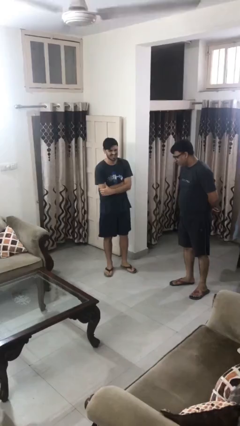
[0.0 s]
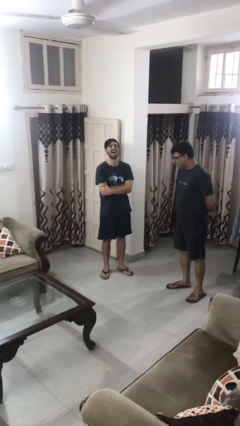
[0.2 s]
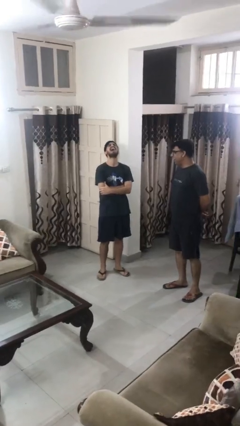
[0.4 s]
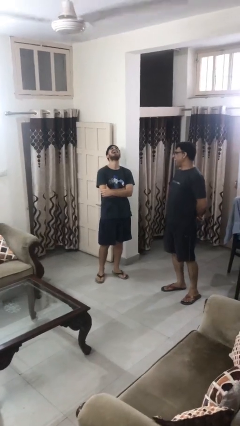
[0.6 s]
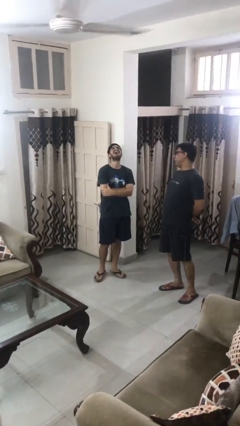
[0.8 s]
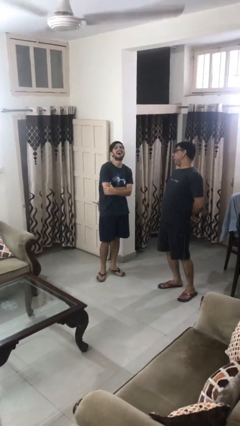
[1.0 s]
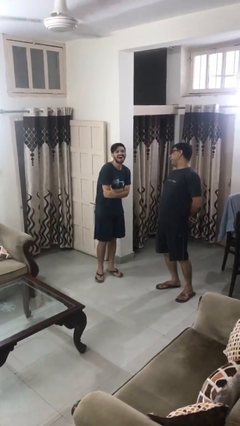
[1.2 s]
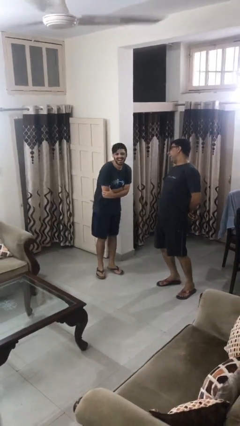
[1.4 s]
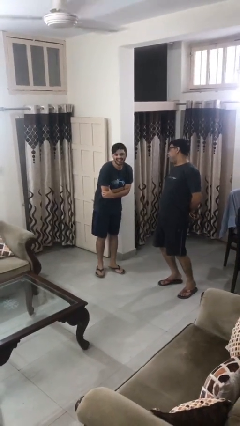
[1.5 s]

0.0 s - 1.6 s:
person laughs with person

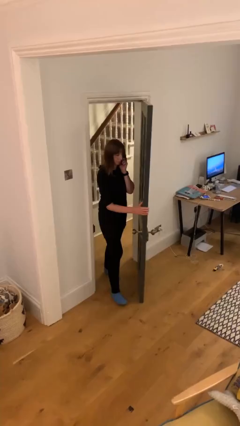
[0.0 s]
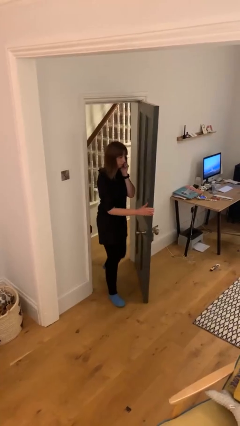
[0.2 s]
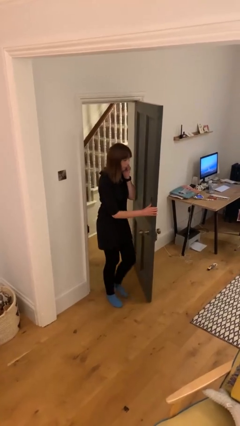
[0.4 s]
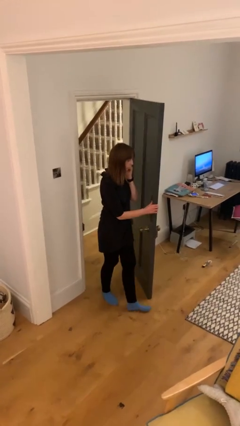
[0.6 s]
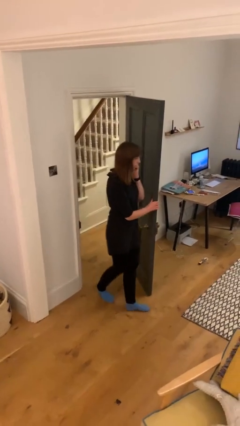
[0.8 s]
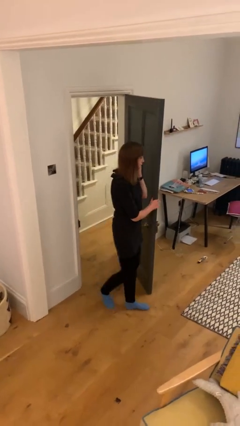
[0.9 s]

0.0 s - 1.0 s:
person enters scene through structure

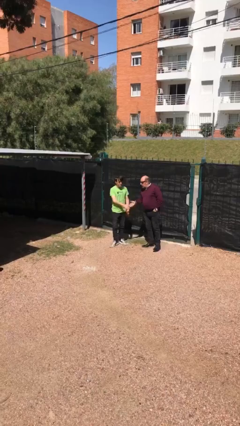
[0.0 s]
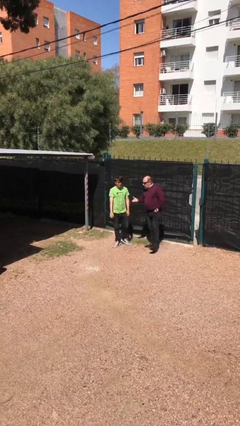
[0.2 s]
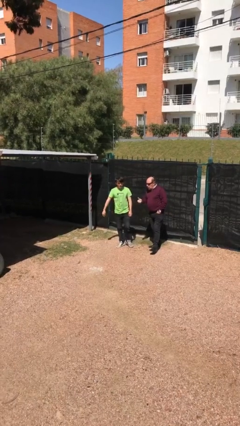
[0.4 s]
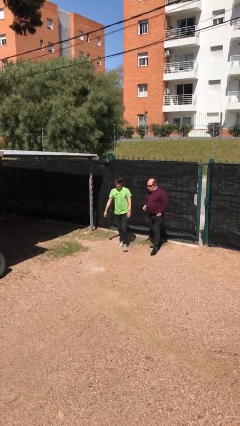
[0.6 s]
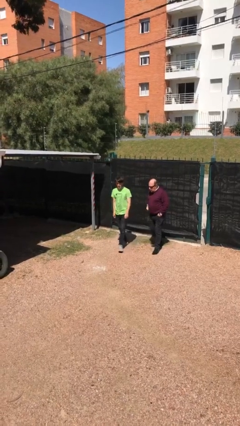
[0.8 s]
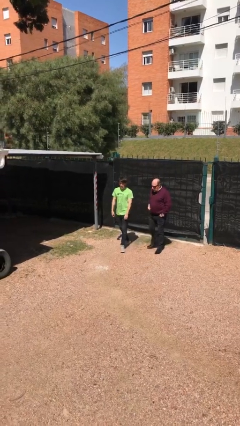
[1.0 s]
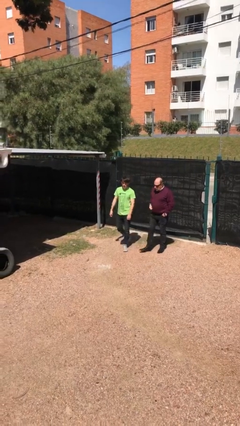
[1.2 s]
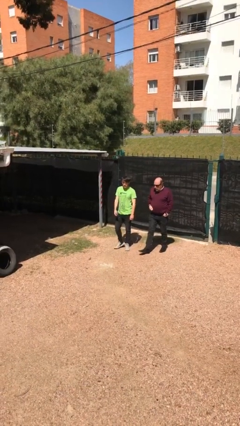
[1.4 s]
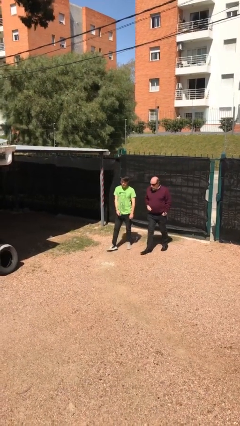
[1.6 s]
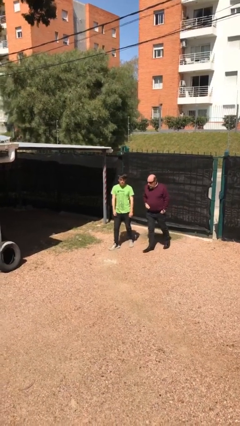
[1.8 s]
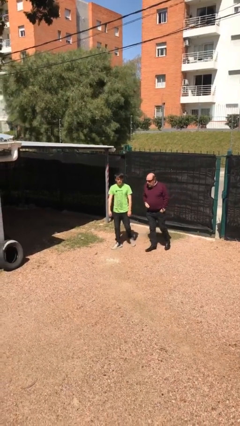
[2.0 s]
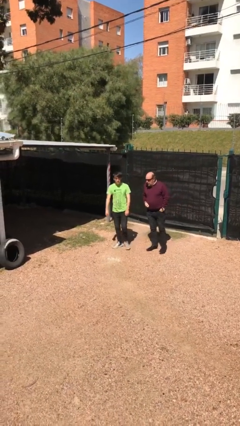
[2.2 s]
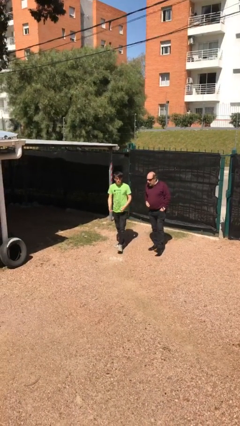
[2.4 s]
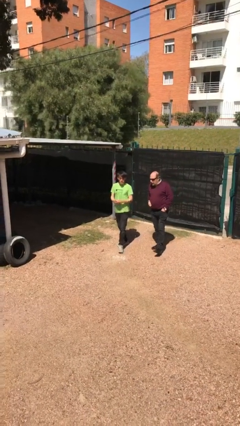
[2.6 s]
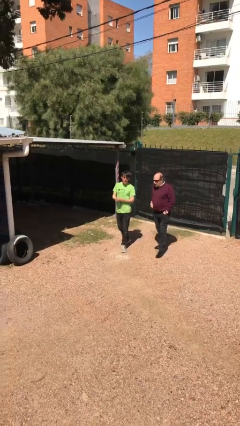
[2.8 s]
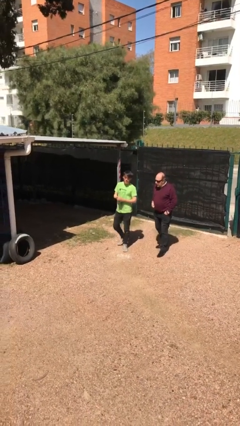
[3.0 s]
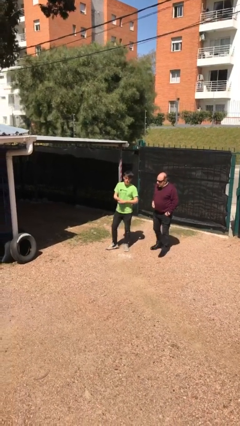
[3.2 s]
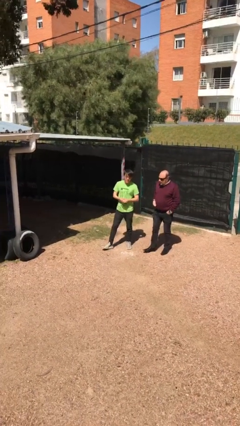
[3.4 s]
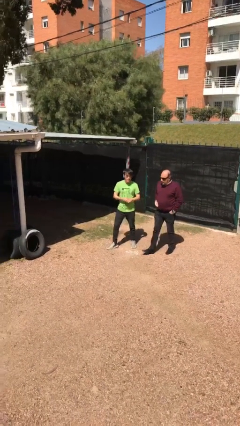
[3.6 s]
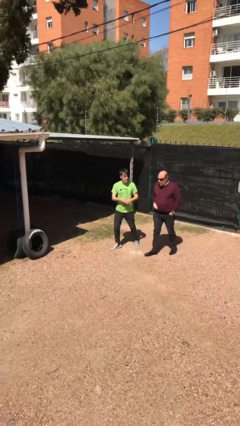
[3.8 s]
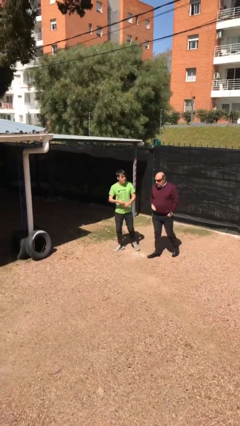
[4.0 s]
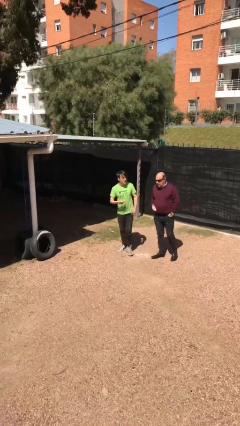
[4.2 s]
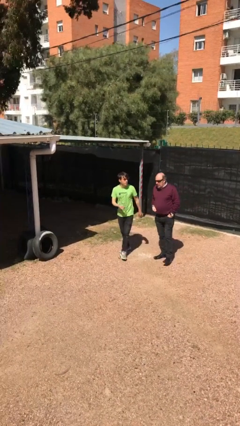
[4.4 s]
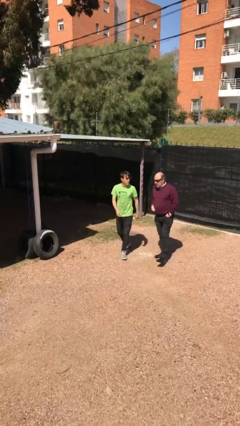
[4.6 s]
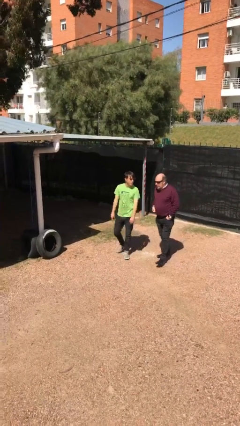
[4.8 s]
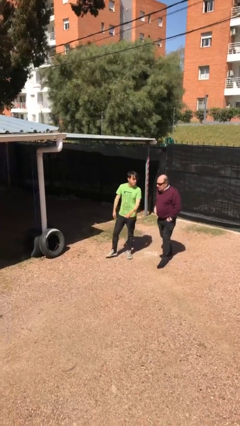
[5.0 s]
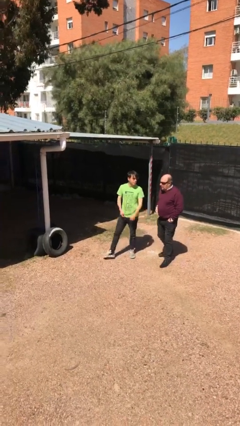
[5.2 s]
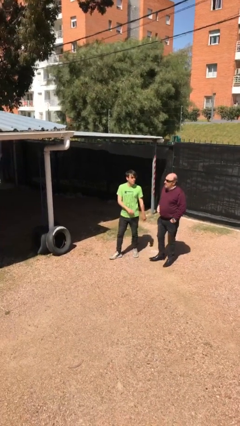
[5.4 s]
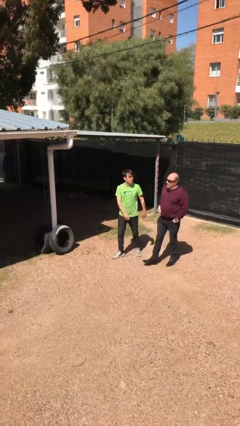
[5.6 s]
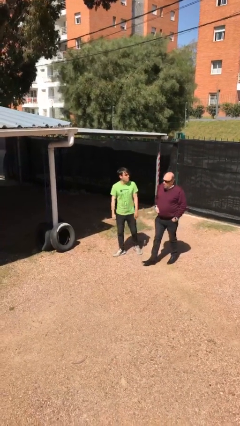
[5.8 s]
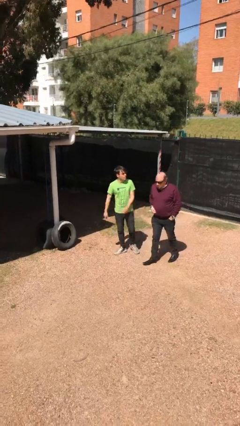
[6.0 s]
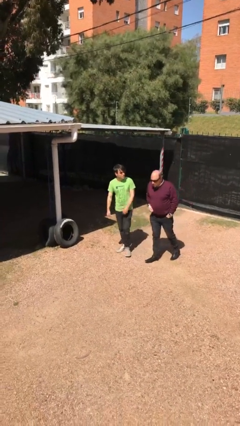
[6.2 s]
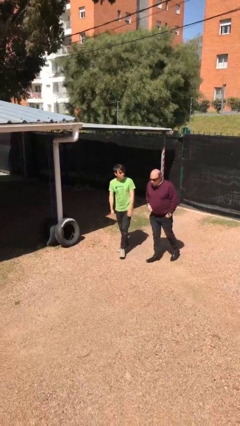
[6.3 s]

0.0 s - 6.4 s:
person talks to person

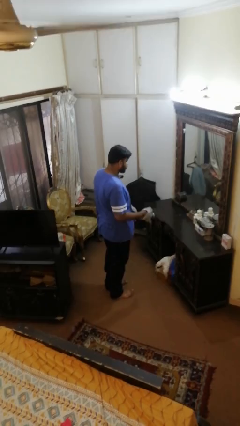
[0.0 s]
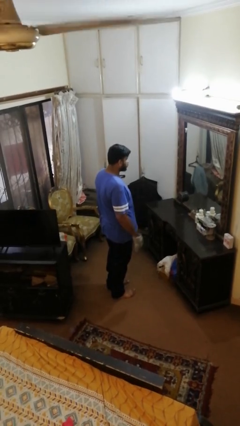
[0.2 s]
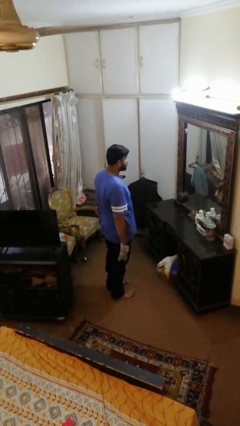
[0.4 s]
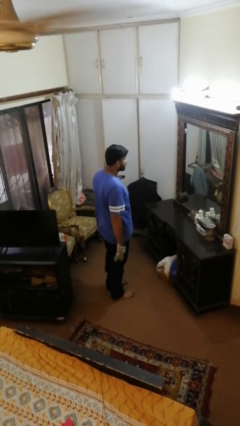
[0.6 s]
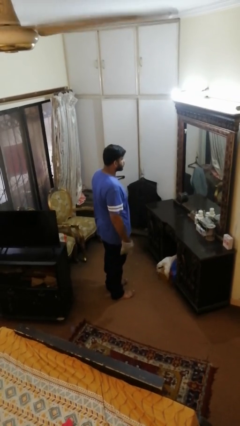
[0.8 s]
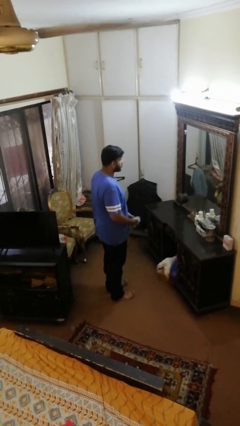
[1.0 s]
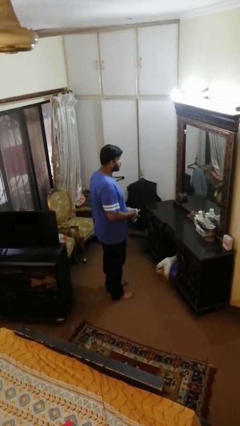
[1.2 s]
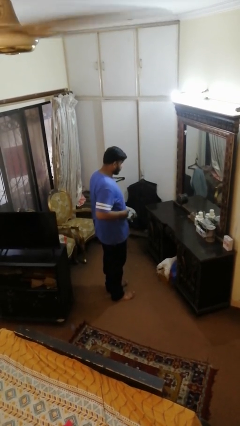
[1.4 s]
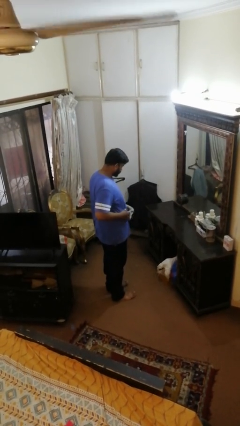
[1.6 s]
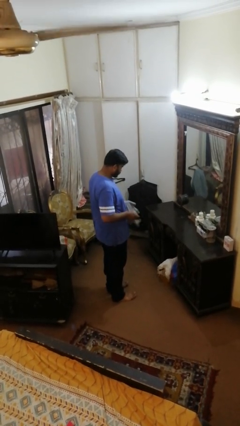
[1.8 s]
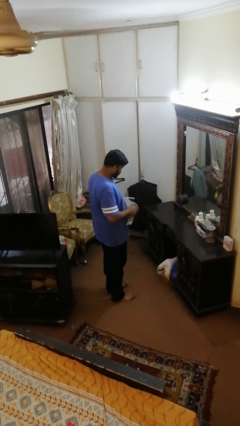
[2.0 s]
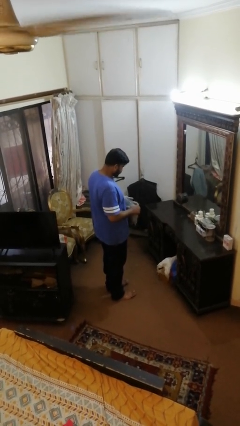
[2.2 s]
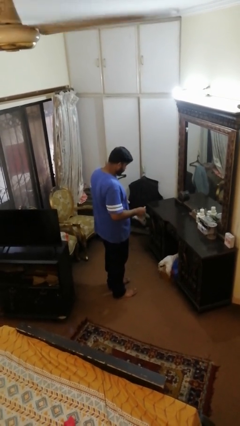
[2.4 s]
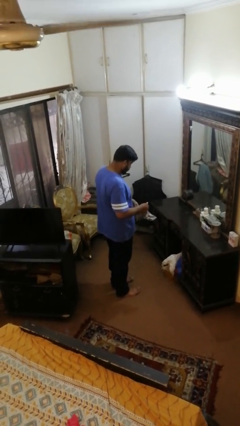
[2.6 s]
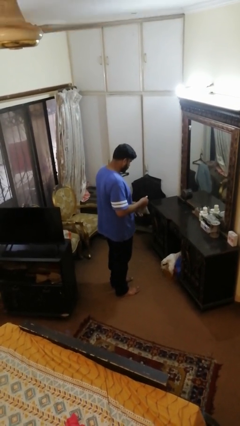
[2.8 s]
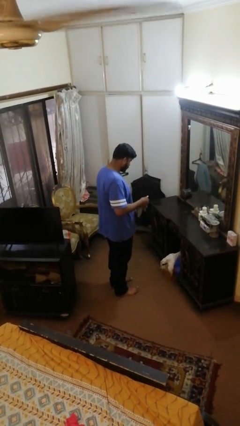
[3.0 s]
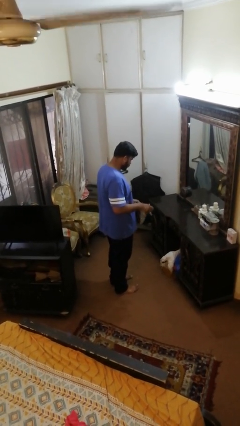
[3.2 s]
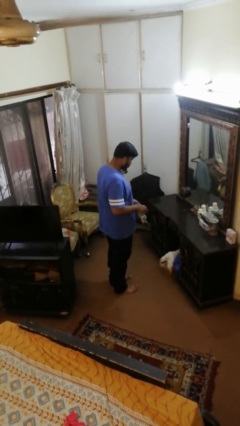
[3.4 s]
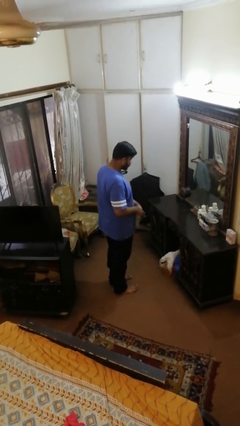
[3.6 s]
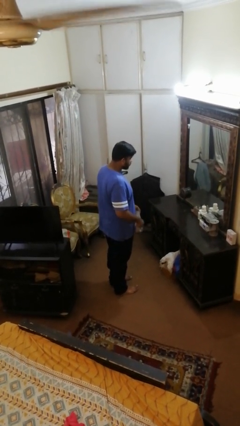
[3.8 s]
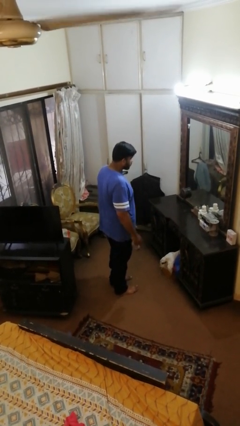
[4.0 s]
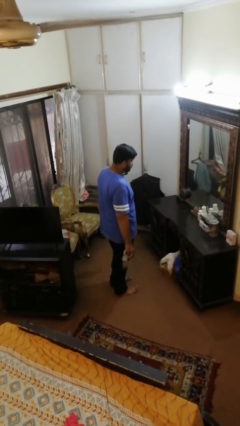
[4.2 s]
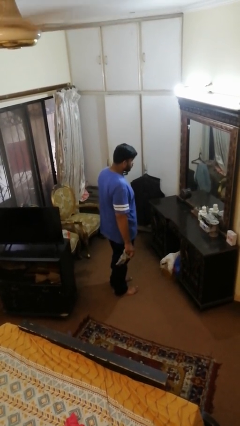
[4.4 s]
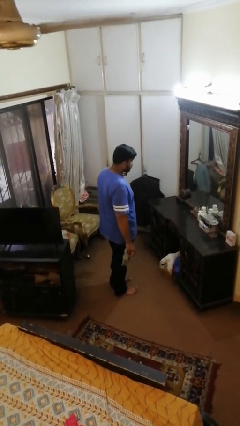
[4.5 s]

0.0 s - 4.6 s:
person takes off gloves

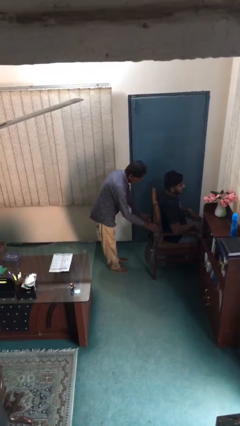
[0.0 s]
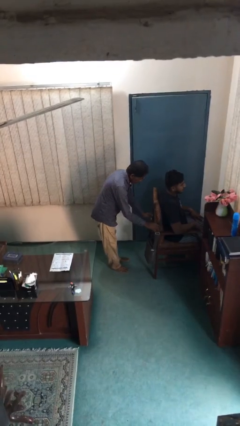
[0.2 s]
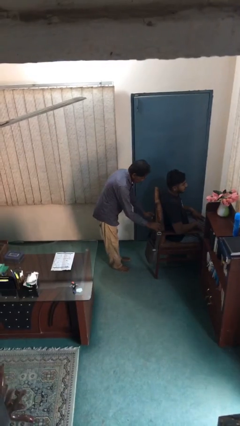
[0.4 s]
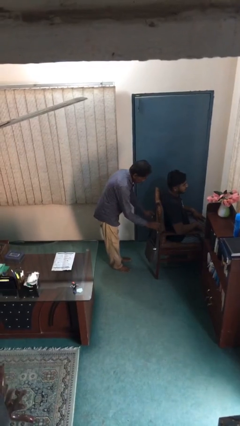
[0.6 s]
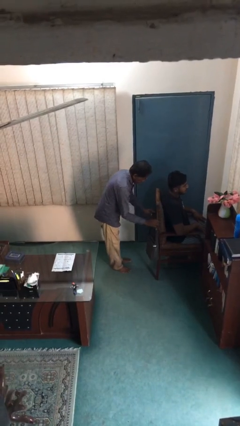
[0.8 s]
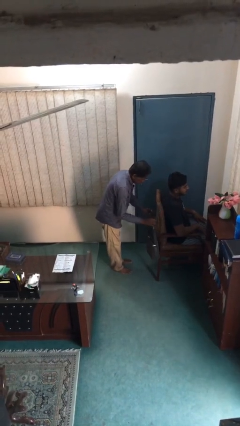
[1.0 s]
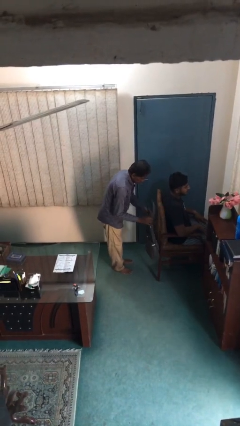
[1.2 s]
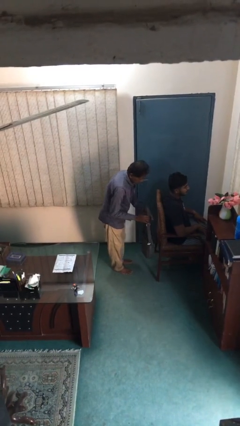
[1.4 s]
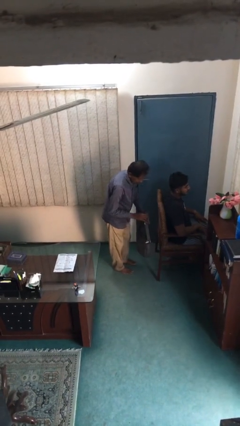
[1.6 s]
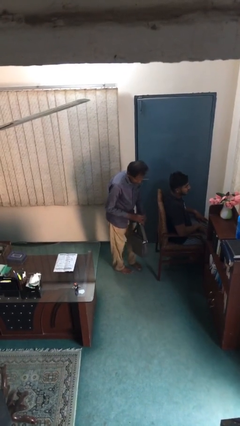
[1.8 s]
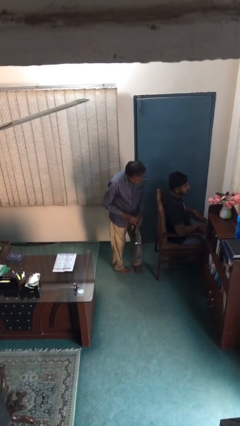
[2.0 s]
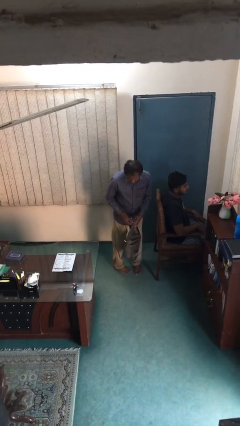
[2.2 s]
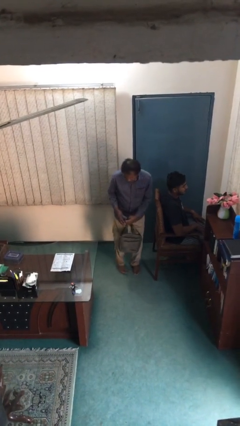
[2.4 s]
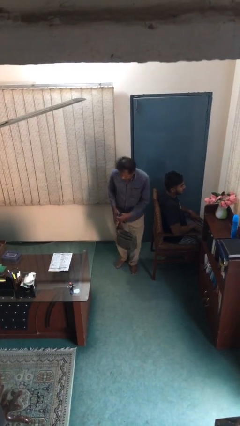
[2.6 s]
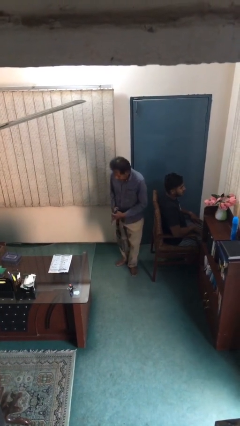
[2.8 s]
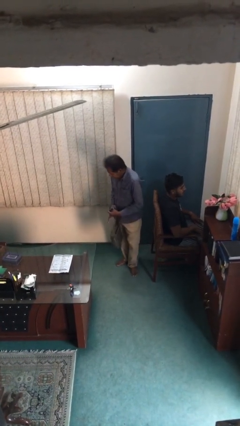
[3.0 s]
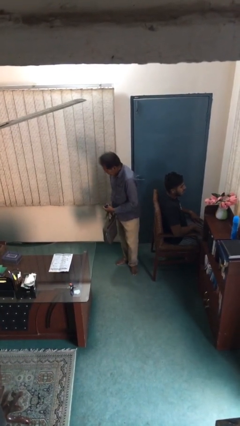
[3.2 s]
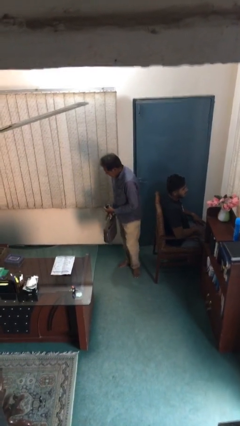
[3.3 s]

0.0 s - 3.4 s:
person steals object from person

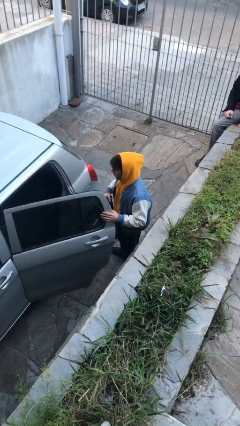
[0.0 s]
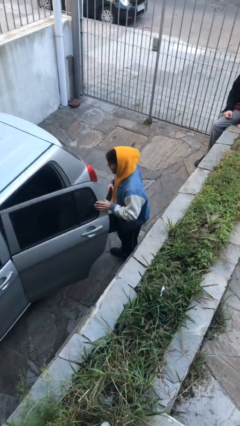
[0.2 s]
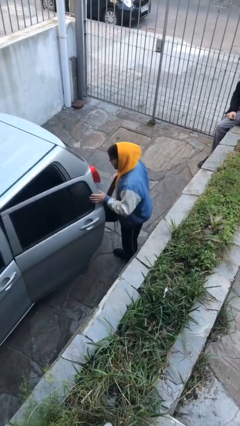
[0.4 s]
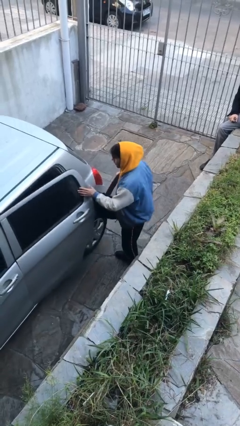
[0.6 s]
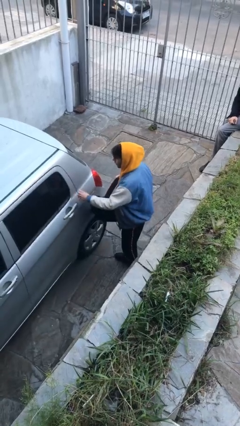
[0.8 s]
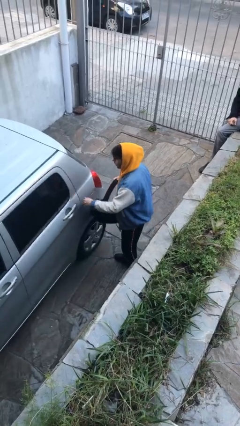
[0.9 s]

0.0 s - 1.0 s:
person closes car door
